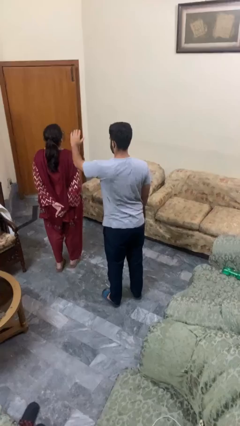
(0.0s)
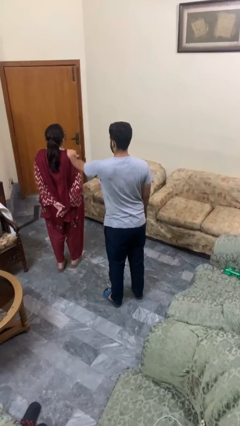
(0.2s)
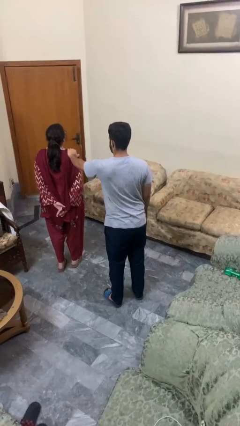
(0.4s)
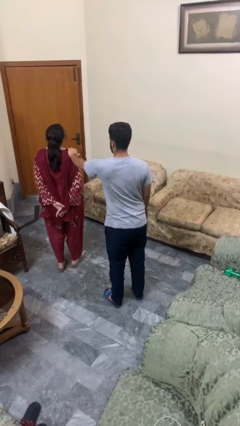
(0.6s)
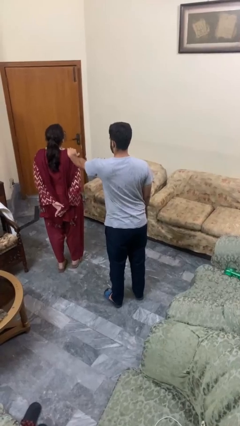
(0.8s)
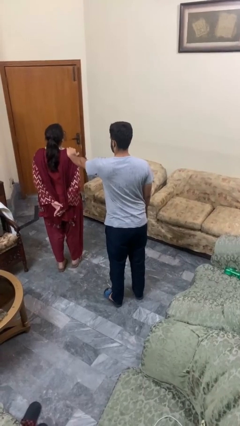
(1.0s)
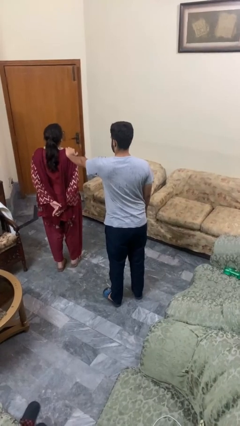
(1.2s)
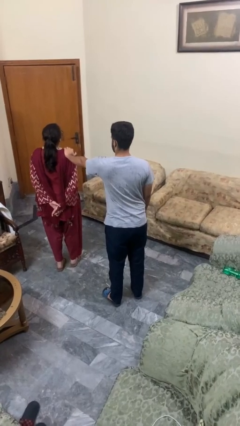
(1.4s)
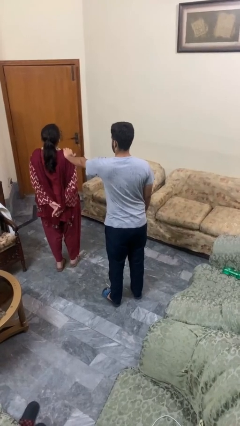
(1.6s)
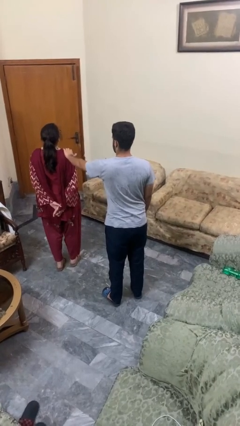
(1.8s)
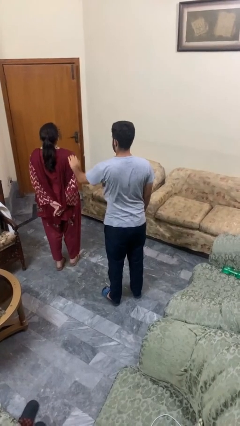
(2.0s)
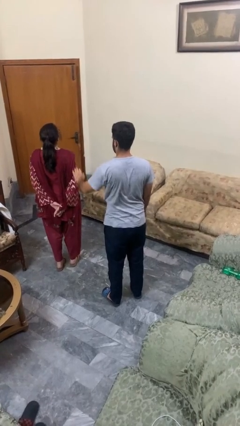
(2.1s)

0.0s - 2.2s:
person pounds shoulders of person

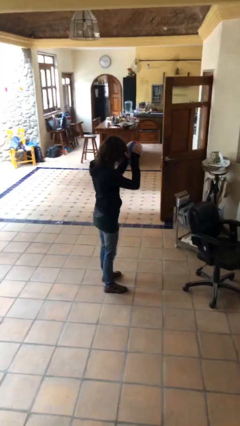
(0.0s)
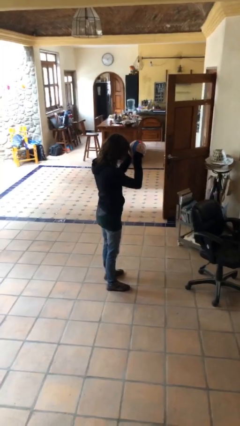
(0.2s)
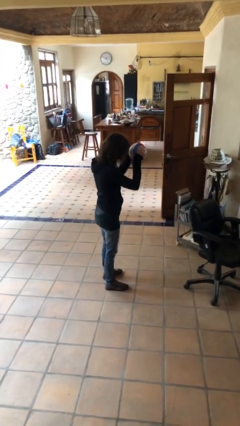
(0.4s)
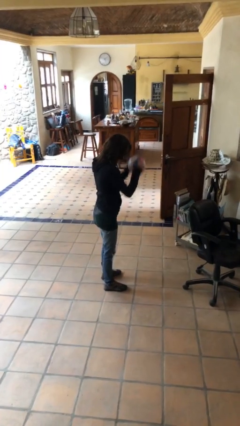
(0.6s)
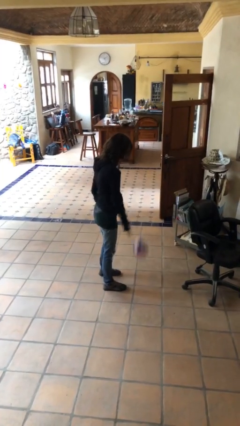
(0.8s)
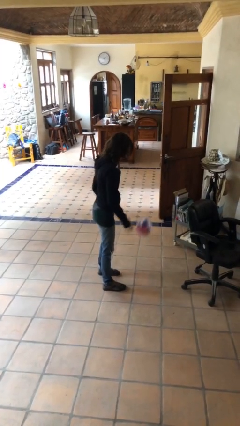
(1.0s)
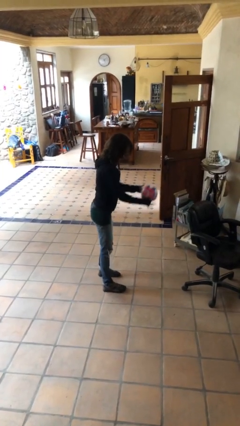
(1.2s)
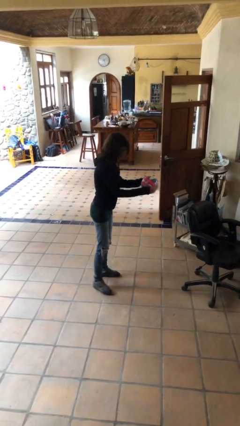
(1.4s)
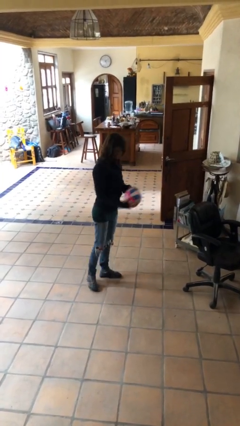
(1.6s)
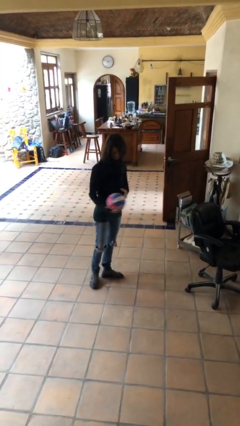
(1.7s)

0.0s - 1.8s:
person bounces ball on floor

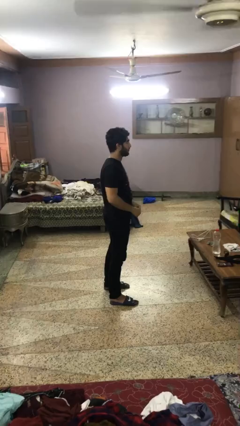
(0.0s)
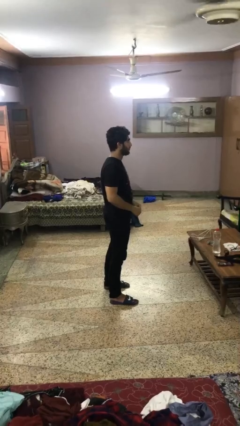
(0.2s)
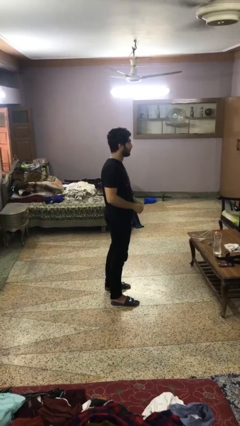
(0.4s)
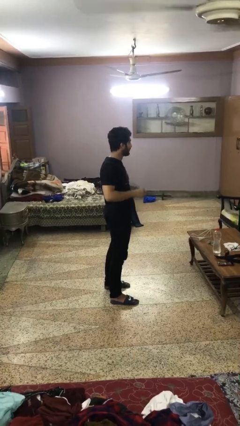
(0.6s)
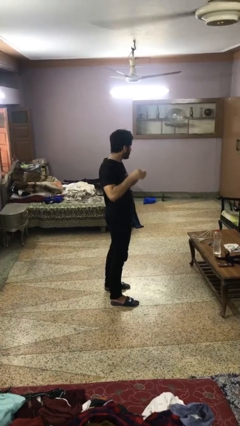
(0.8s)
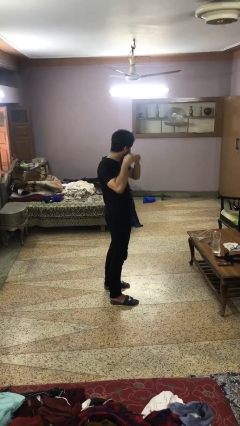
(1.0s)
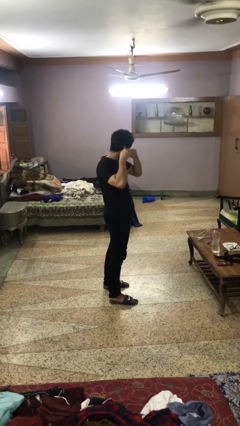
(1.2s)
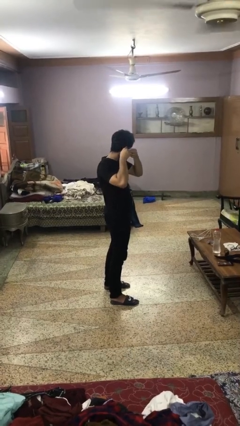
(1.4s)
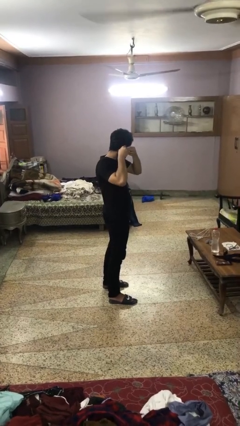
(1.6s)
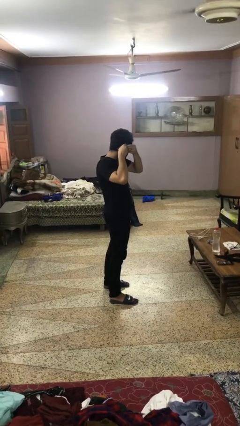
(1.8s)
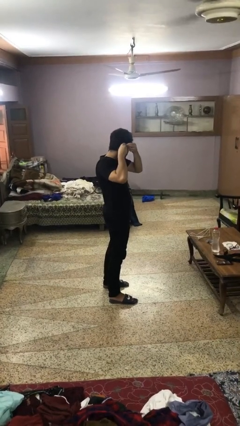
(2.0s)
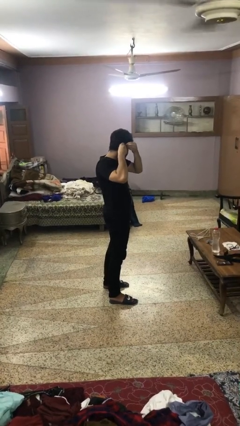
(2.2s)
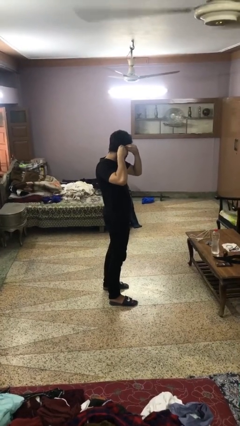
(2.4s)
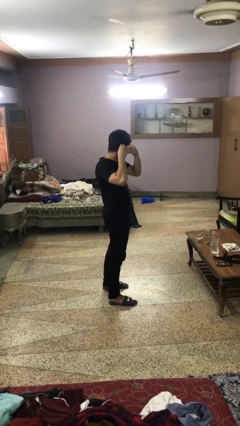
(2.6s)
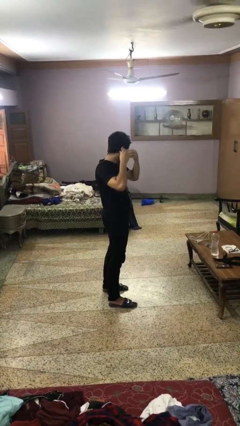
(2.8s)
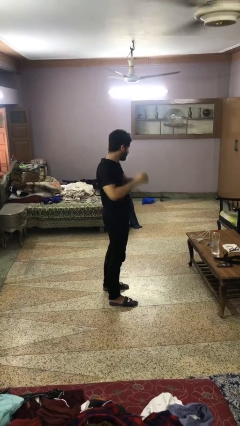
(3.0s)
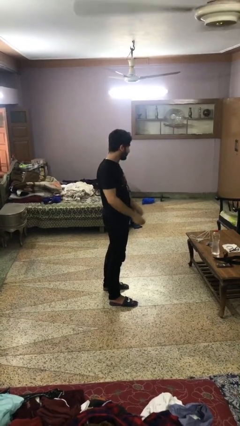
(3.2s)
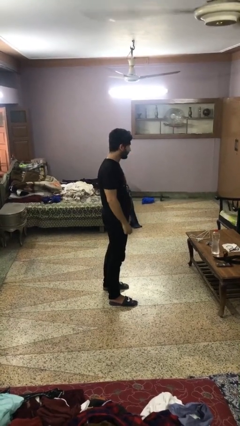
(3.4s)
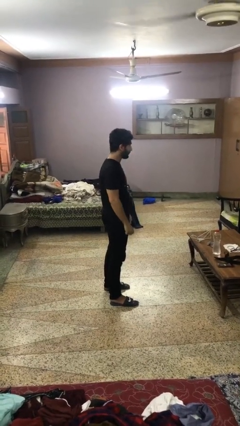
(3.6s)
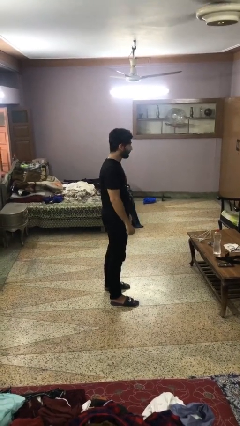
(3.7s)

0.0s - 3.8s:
person puts on earrings

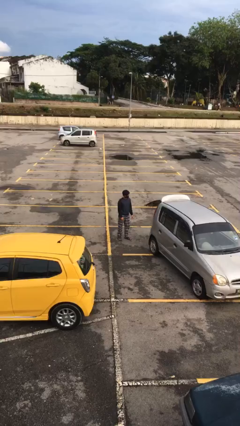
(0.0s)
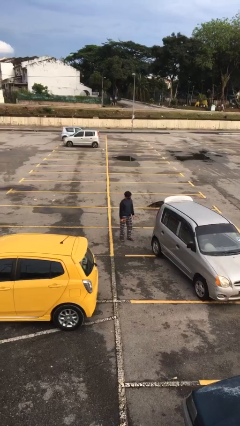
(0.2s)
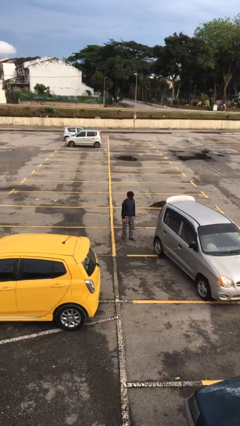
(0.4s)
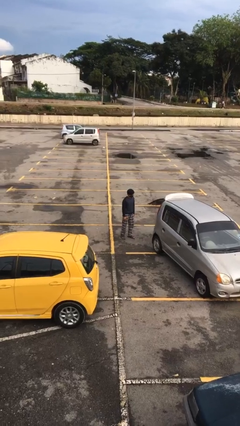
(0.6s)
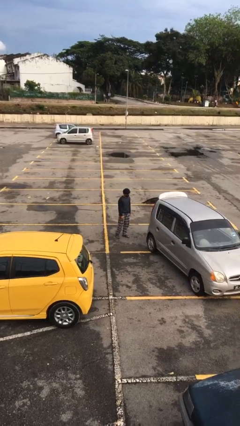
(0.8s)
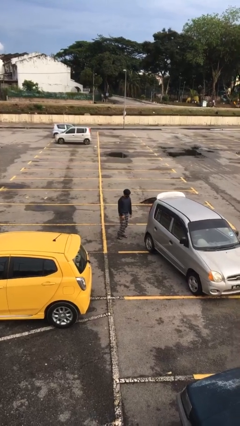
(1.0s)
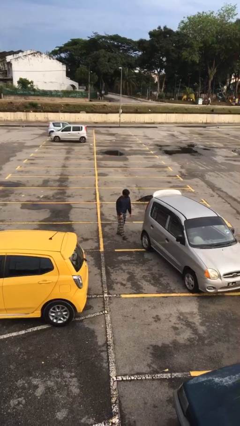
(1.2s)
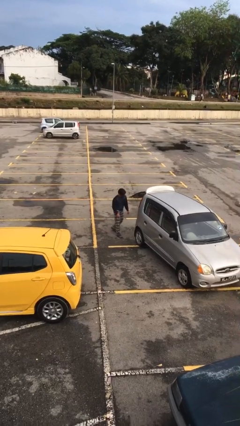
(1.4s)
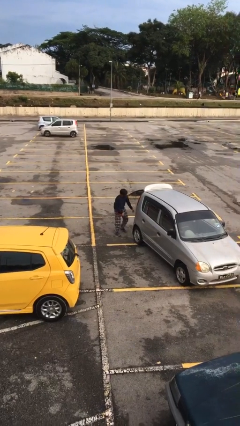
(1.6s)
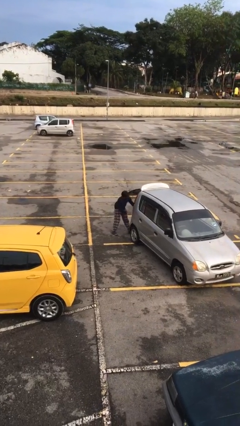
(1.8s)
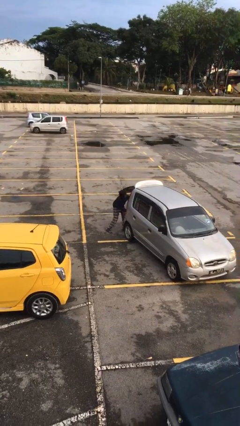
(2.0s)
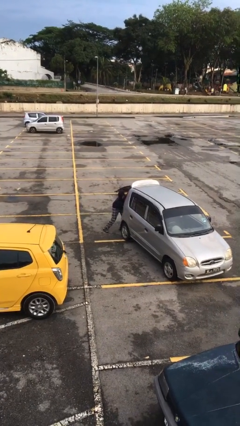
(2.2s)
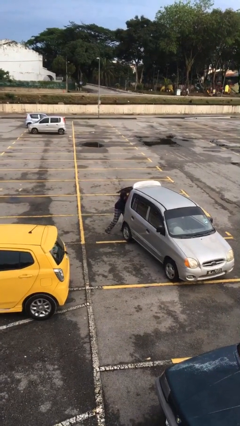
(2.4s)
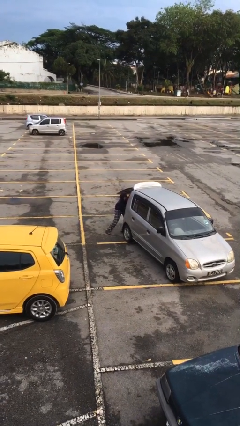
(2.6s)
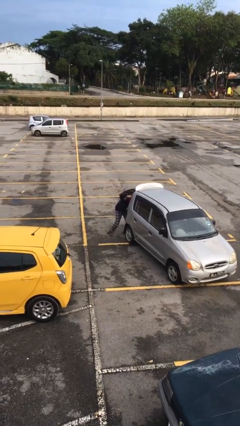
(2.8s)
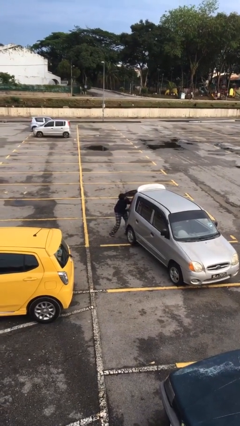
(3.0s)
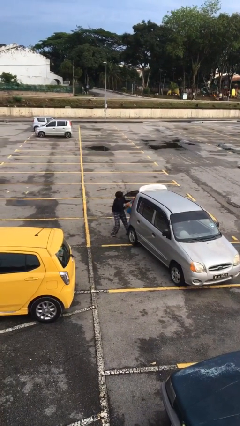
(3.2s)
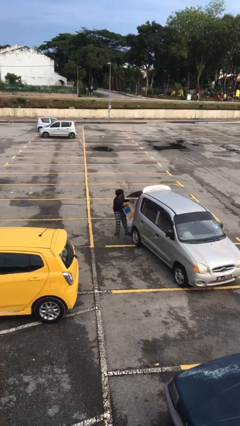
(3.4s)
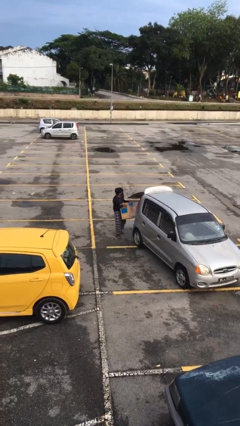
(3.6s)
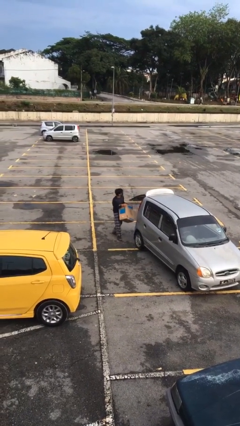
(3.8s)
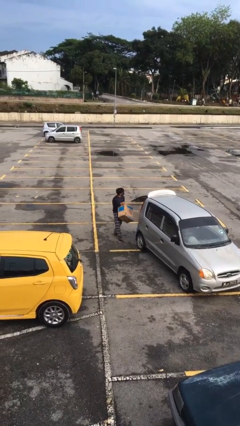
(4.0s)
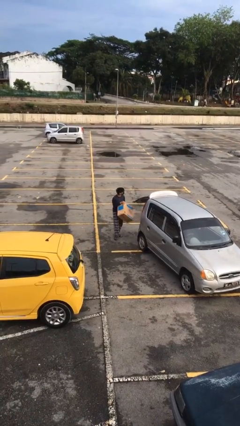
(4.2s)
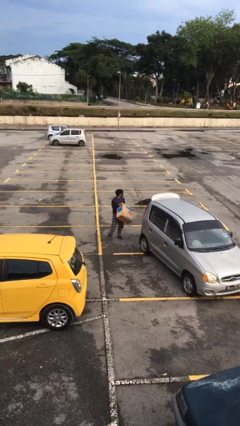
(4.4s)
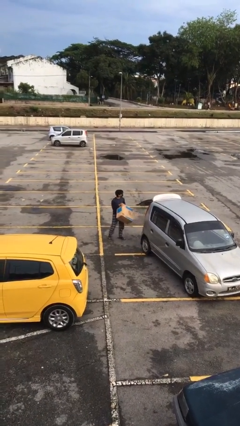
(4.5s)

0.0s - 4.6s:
person unloads car

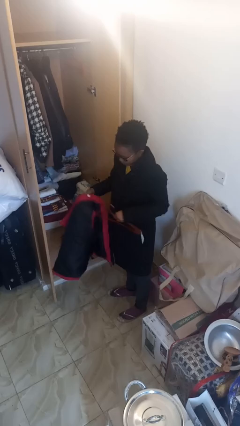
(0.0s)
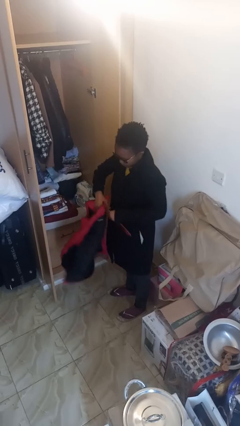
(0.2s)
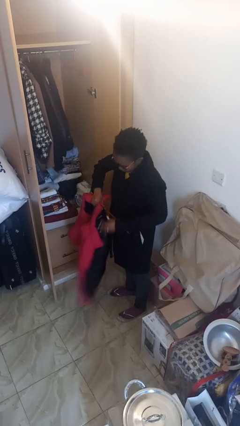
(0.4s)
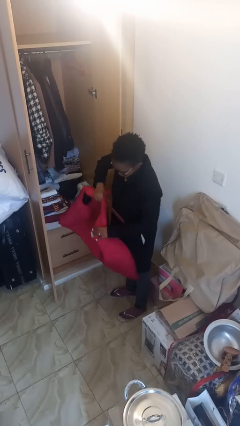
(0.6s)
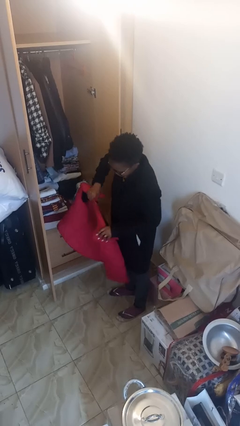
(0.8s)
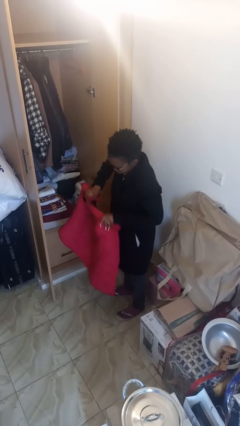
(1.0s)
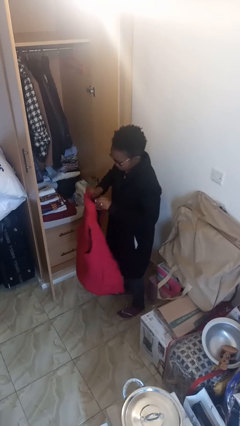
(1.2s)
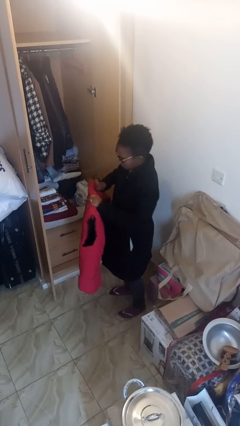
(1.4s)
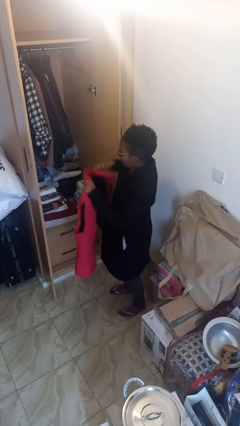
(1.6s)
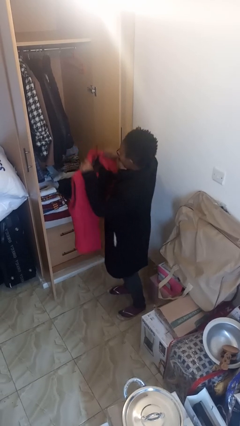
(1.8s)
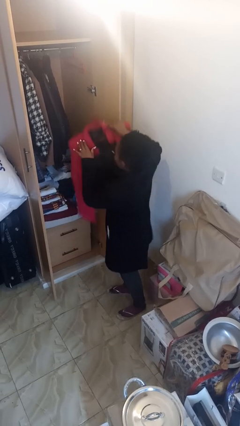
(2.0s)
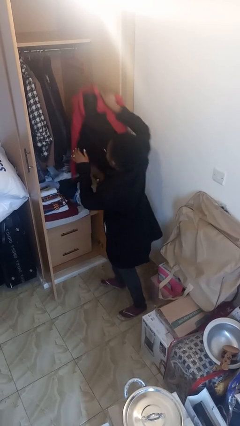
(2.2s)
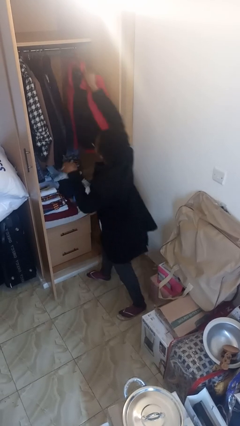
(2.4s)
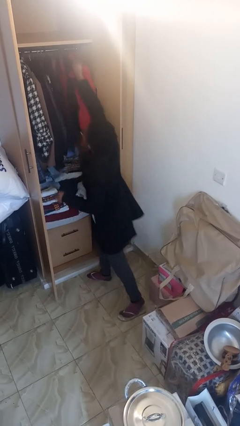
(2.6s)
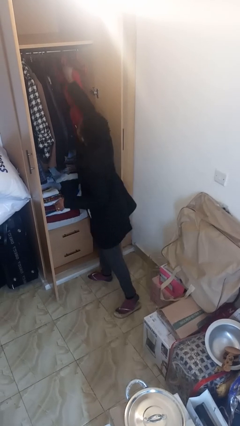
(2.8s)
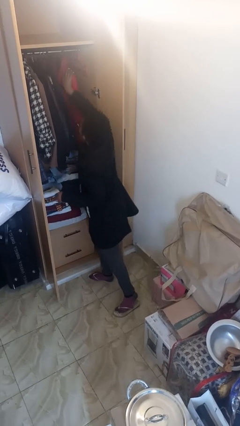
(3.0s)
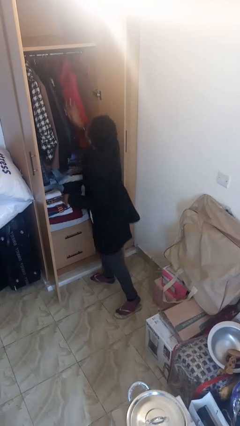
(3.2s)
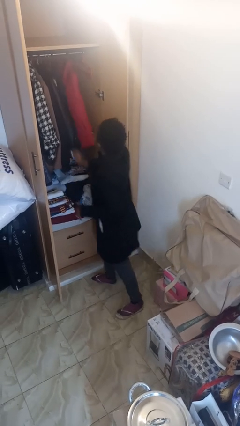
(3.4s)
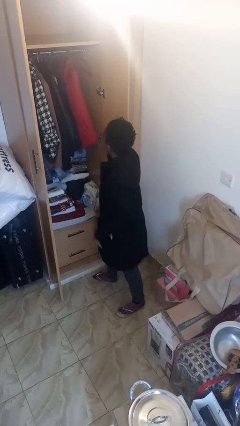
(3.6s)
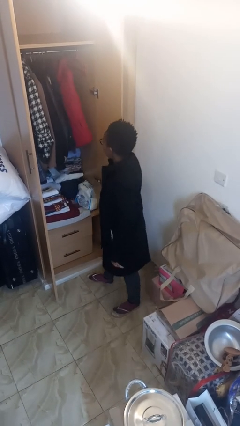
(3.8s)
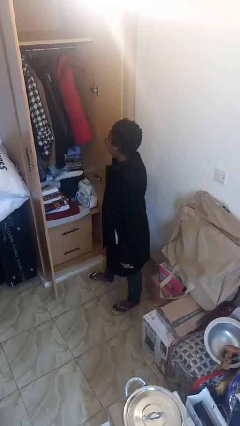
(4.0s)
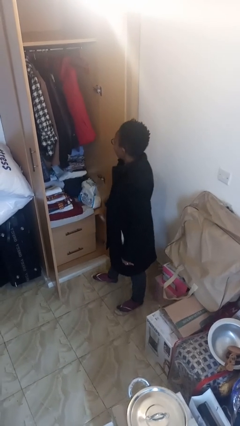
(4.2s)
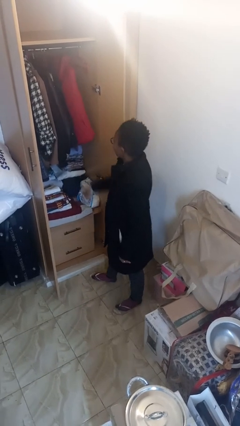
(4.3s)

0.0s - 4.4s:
person puts clothes into closet

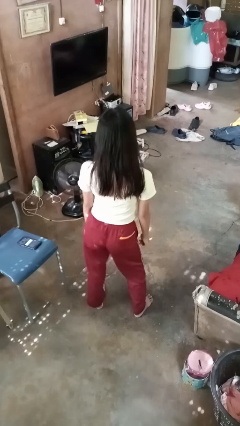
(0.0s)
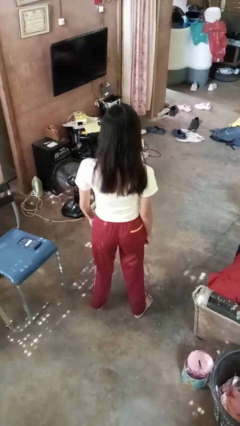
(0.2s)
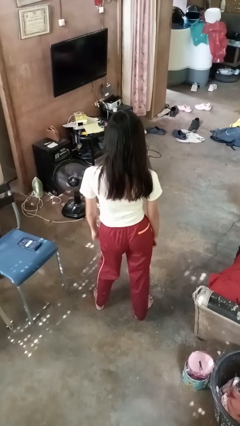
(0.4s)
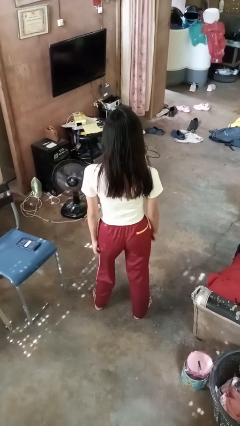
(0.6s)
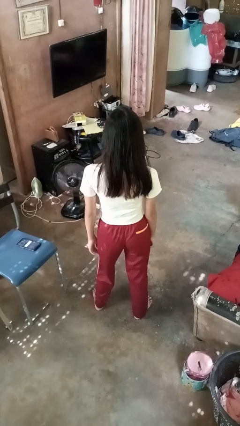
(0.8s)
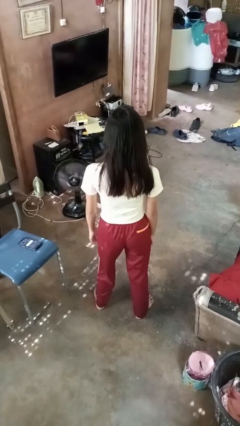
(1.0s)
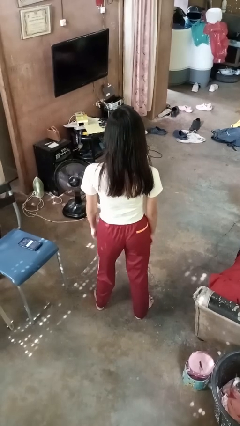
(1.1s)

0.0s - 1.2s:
person wiggles hips
